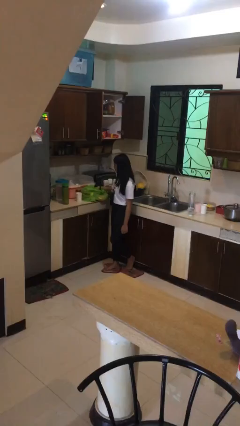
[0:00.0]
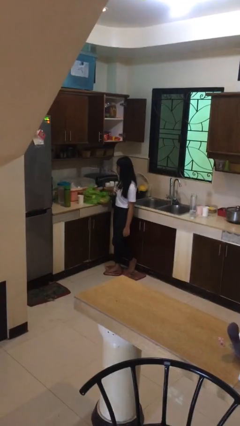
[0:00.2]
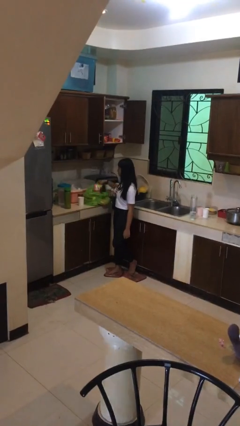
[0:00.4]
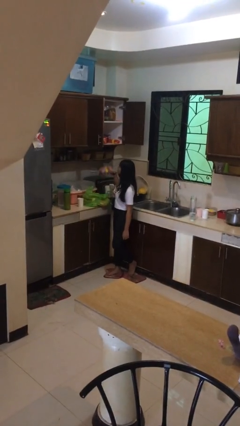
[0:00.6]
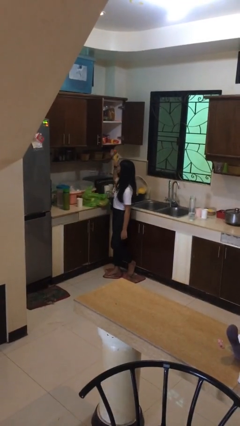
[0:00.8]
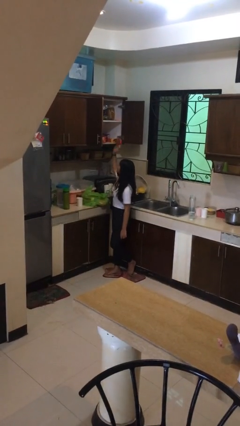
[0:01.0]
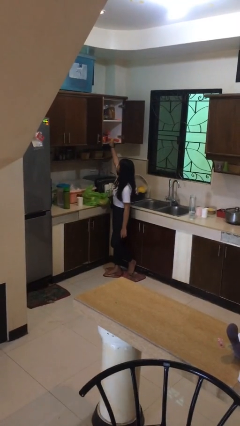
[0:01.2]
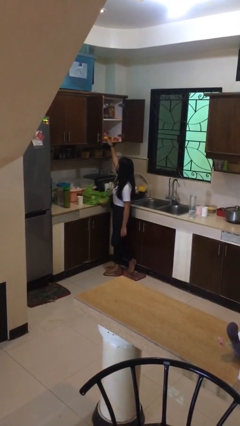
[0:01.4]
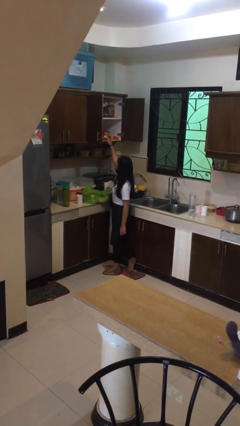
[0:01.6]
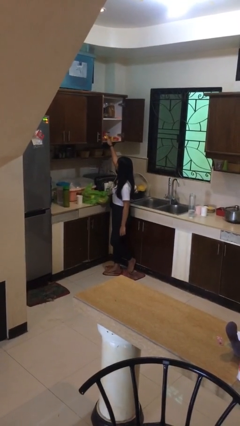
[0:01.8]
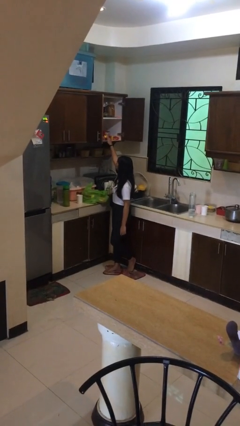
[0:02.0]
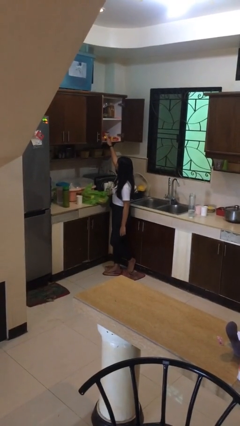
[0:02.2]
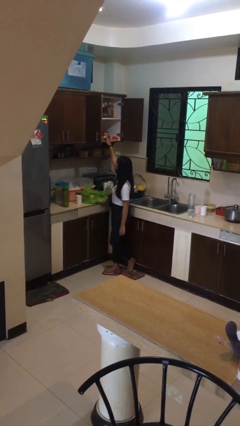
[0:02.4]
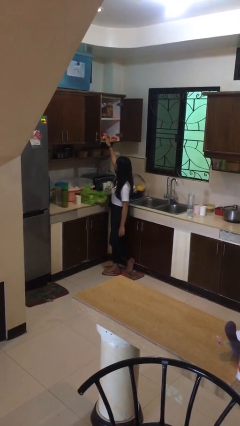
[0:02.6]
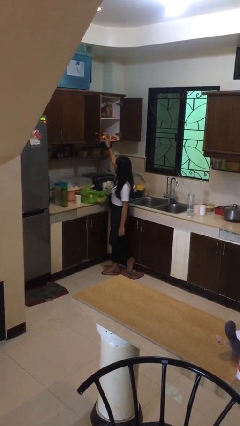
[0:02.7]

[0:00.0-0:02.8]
person loads groceries into cabinet

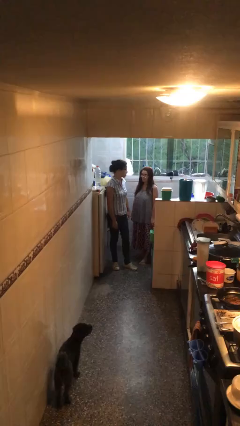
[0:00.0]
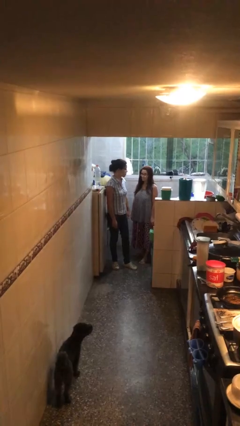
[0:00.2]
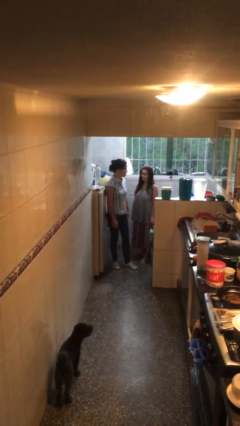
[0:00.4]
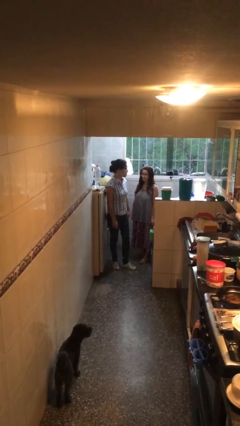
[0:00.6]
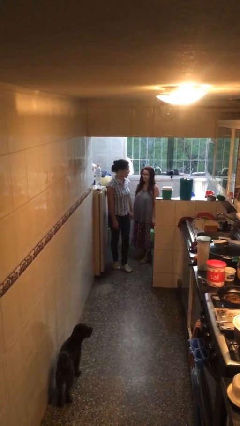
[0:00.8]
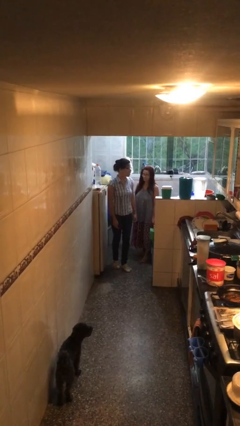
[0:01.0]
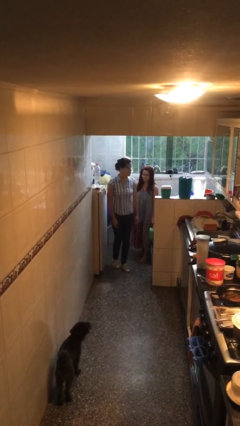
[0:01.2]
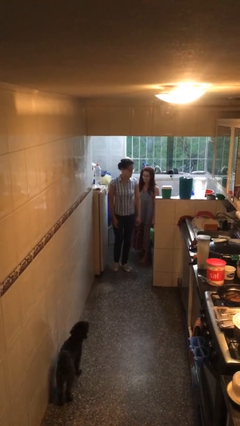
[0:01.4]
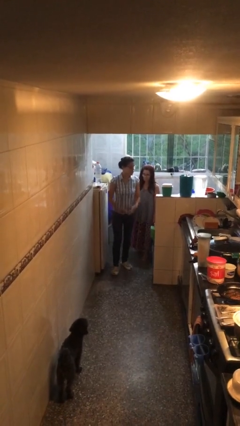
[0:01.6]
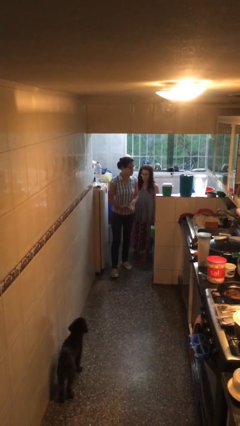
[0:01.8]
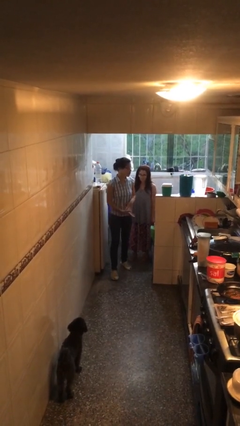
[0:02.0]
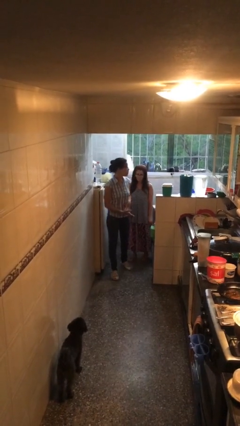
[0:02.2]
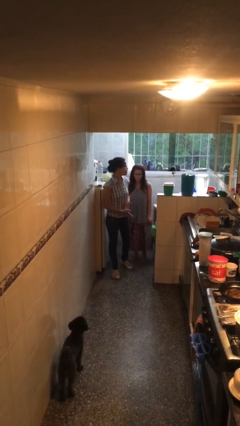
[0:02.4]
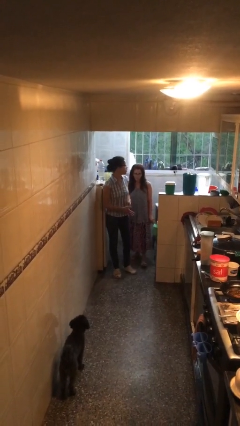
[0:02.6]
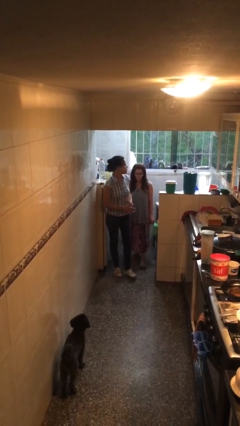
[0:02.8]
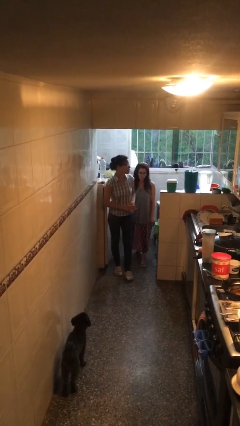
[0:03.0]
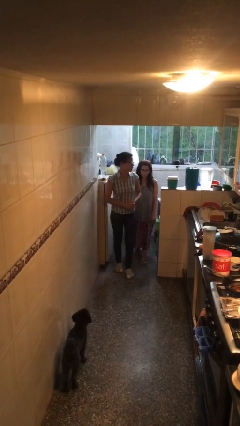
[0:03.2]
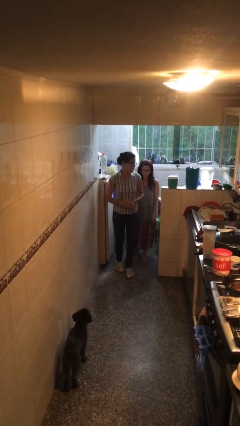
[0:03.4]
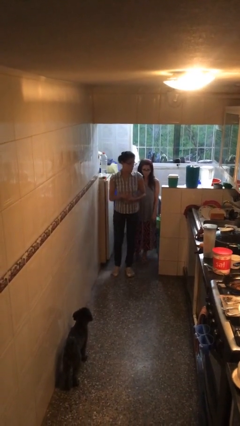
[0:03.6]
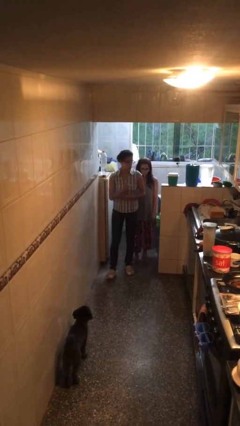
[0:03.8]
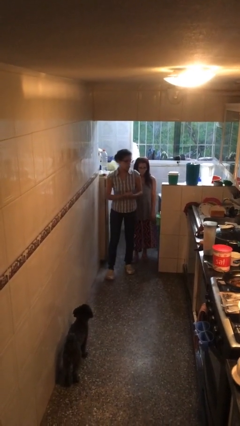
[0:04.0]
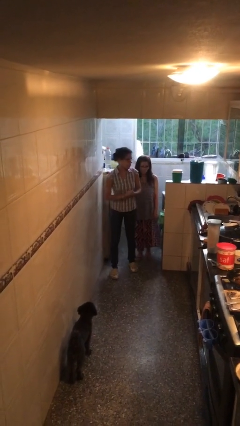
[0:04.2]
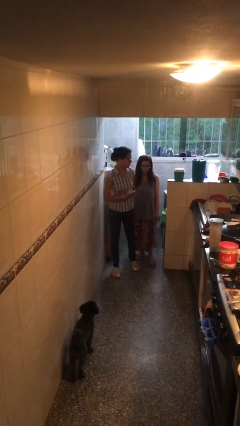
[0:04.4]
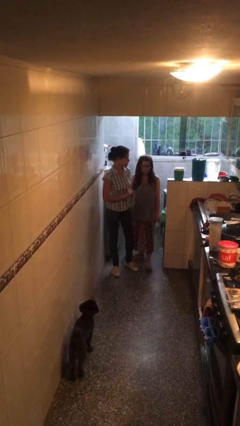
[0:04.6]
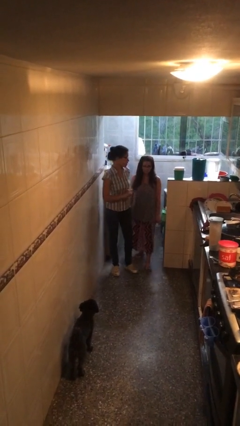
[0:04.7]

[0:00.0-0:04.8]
person talks to person

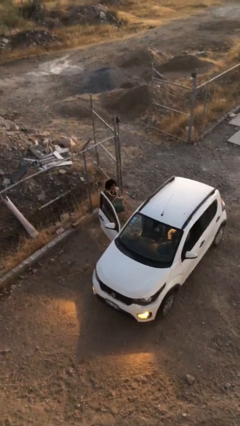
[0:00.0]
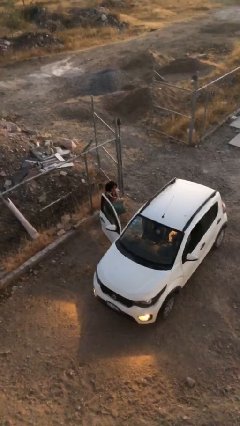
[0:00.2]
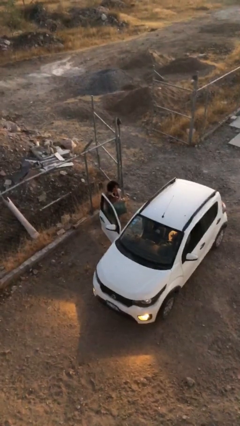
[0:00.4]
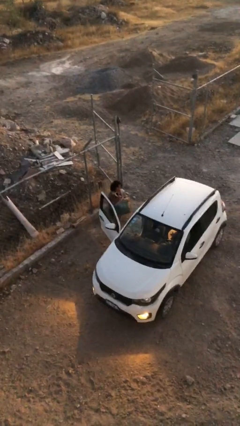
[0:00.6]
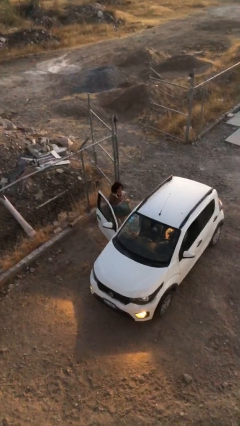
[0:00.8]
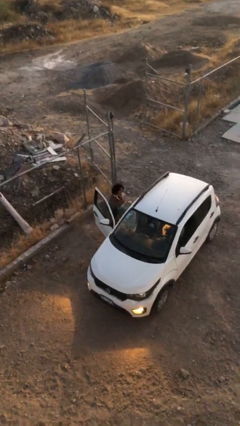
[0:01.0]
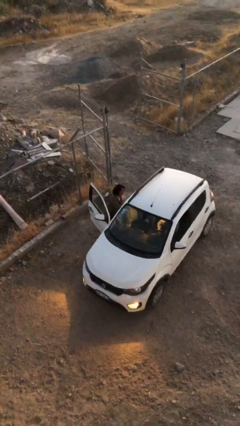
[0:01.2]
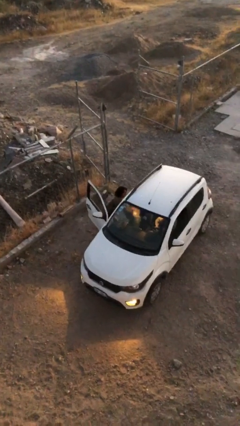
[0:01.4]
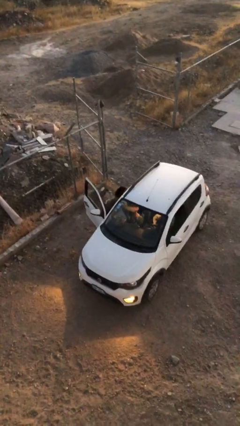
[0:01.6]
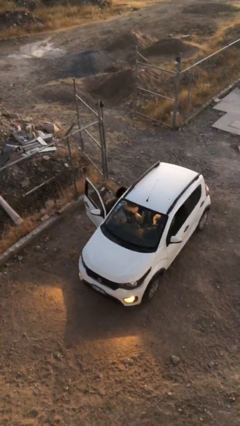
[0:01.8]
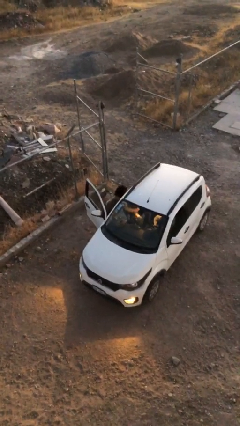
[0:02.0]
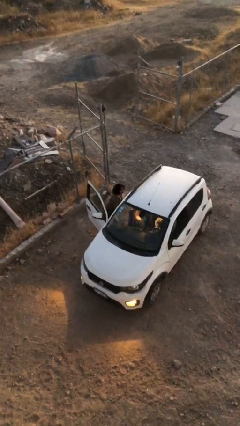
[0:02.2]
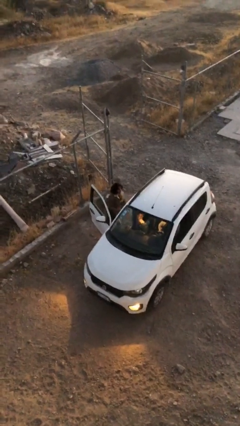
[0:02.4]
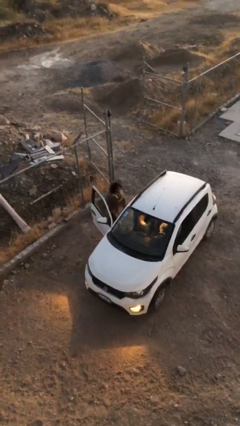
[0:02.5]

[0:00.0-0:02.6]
person loads car

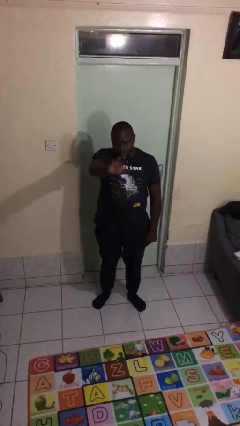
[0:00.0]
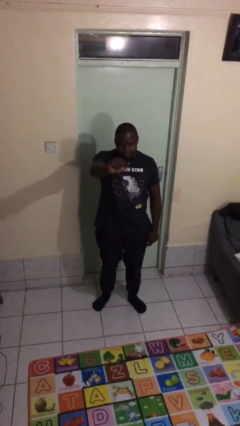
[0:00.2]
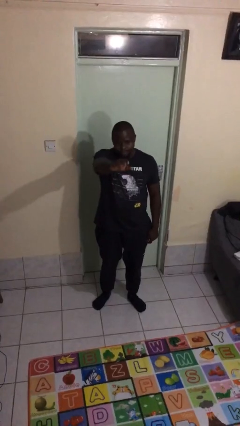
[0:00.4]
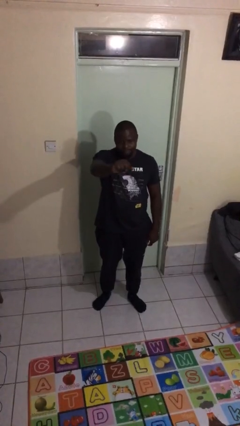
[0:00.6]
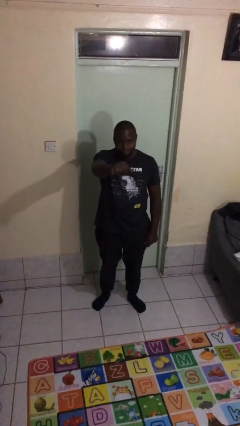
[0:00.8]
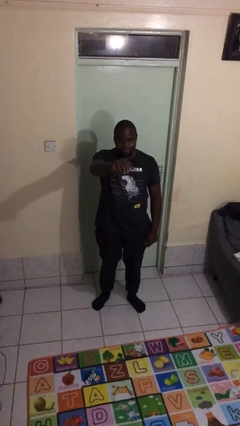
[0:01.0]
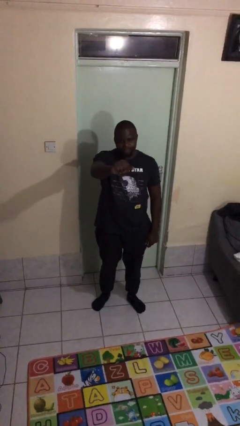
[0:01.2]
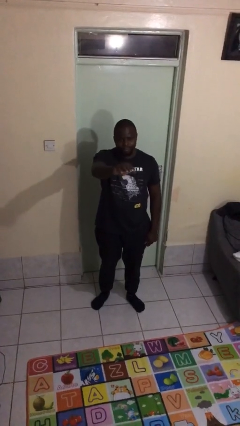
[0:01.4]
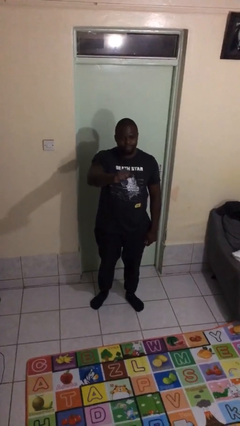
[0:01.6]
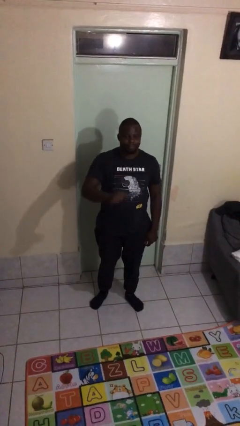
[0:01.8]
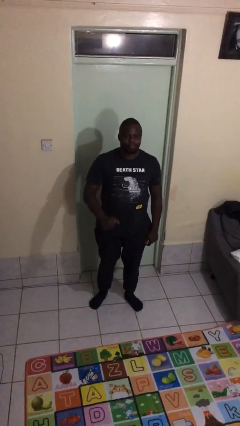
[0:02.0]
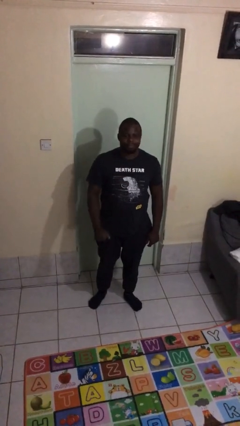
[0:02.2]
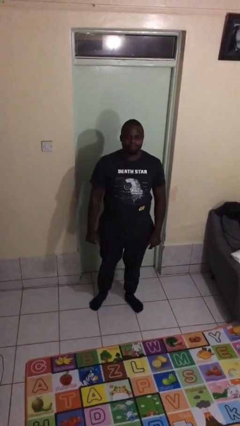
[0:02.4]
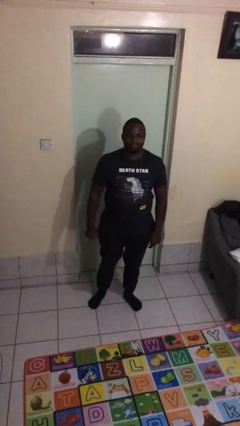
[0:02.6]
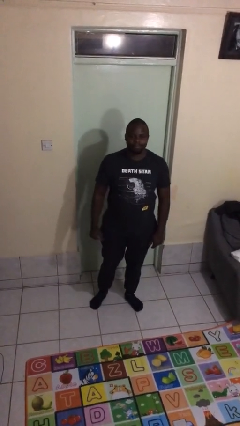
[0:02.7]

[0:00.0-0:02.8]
person gestures come here

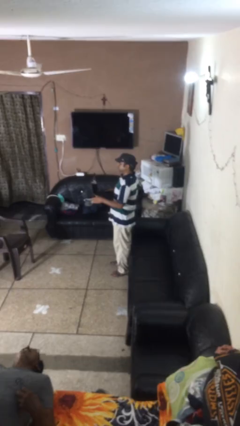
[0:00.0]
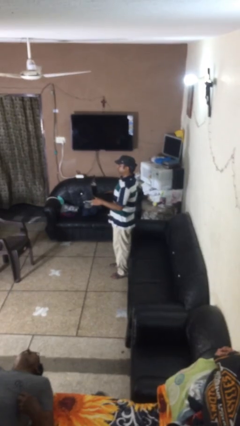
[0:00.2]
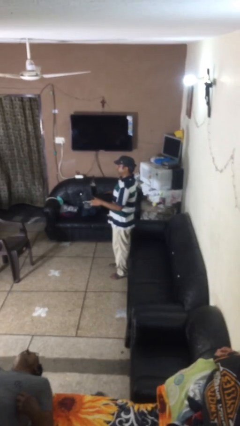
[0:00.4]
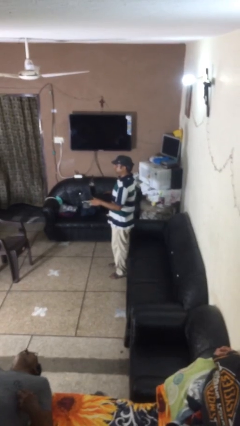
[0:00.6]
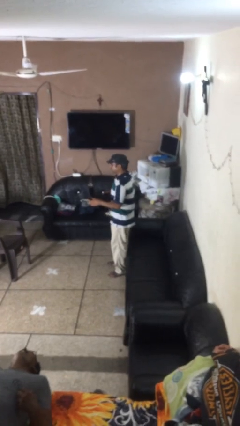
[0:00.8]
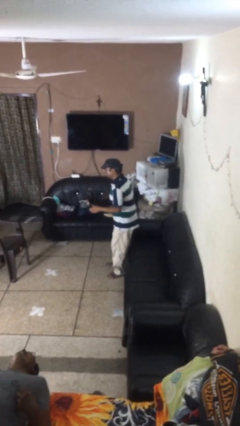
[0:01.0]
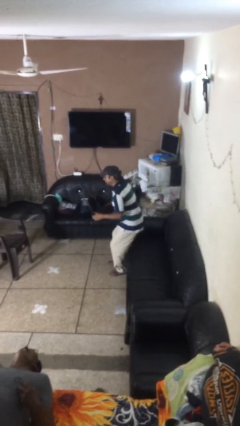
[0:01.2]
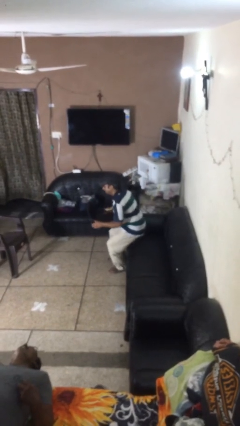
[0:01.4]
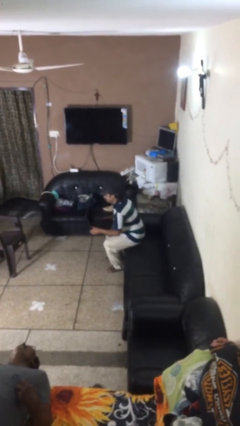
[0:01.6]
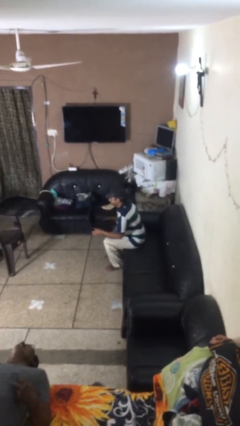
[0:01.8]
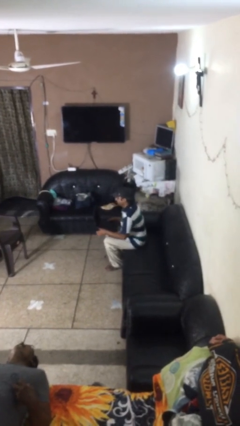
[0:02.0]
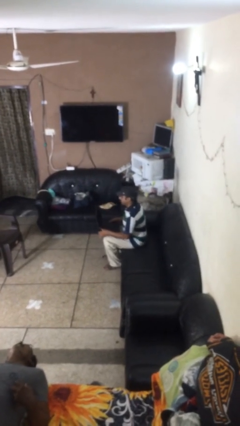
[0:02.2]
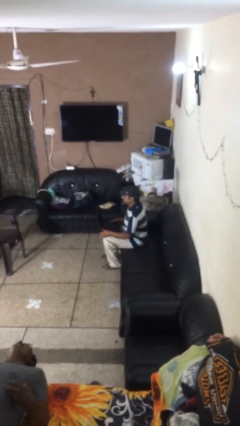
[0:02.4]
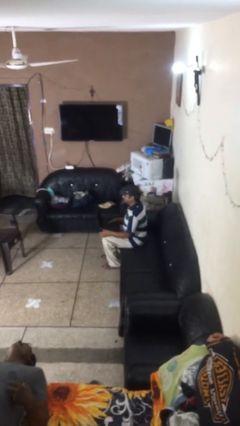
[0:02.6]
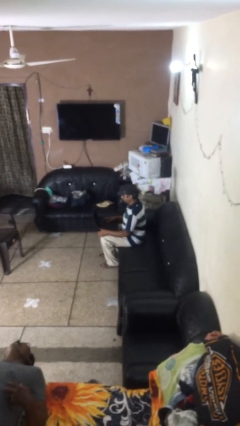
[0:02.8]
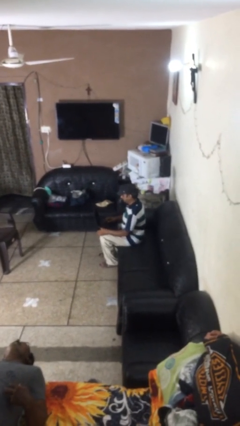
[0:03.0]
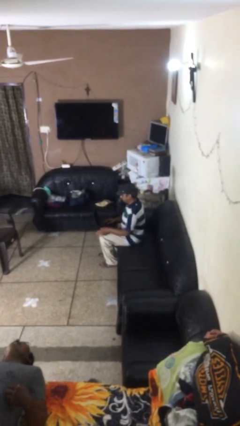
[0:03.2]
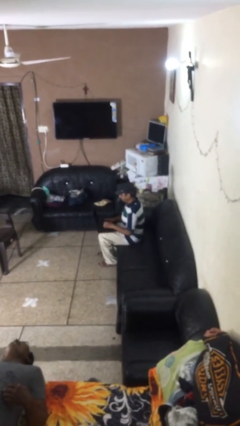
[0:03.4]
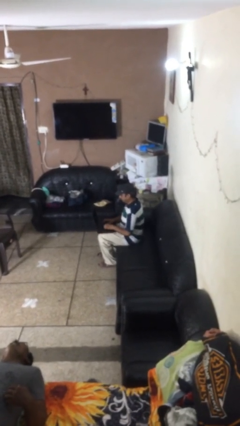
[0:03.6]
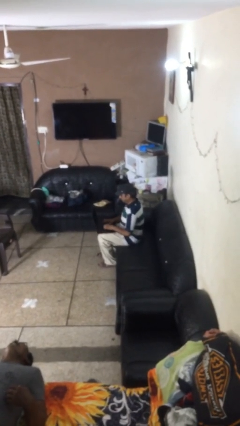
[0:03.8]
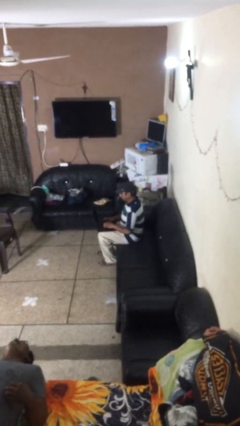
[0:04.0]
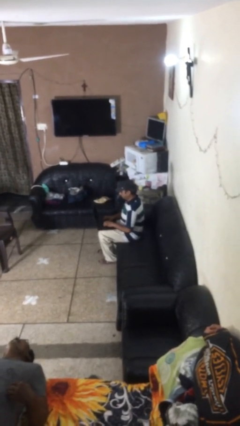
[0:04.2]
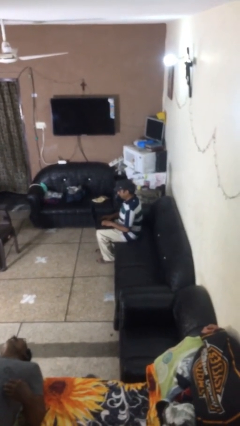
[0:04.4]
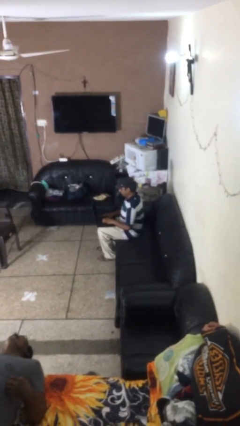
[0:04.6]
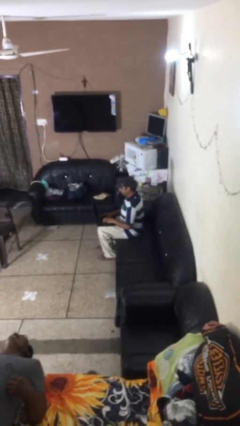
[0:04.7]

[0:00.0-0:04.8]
person sits down
